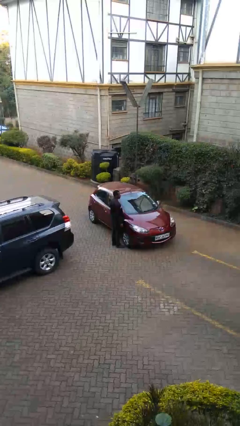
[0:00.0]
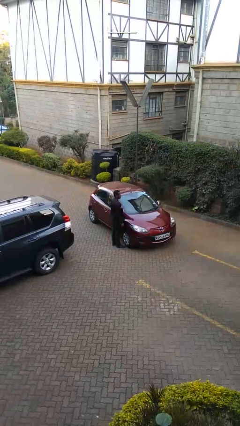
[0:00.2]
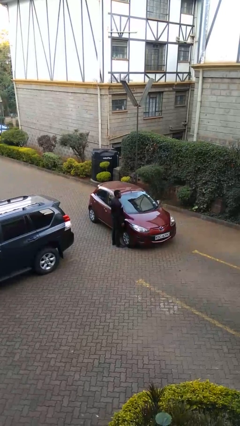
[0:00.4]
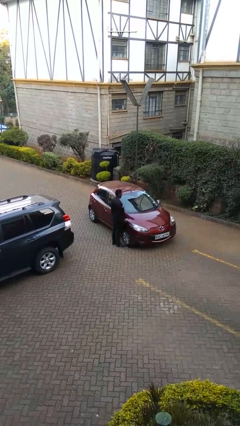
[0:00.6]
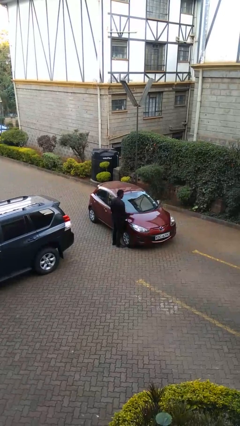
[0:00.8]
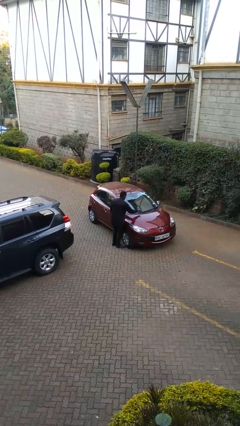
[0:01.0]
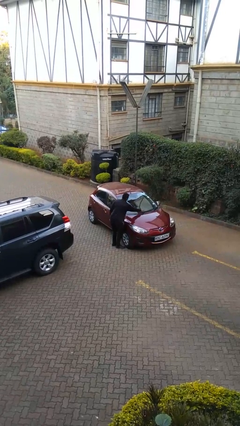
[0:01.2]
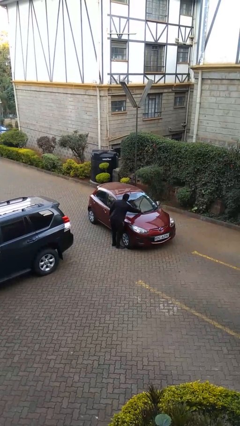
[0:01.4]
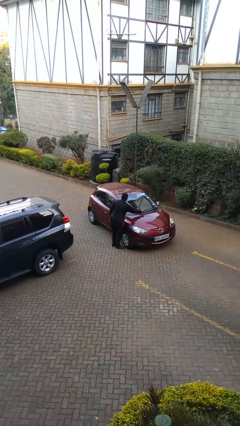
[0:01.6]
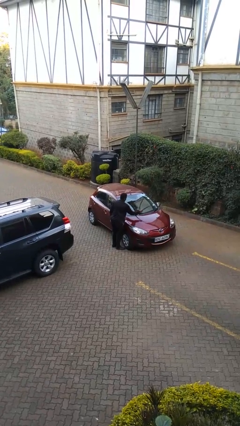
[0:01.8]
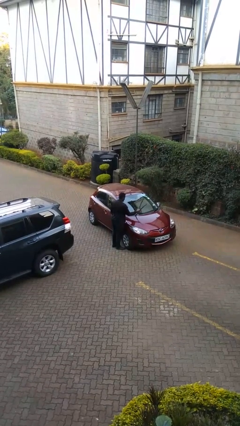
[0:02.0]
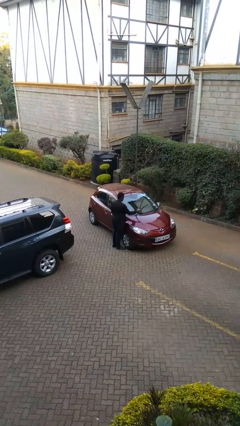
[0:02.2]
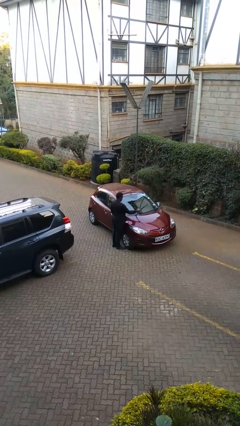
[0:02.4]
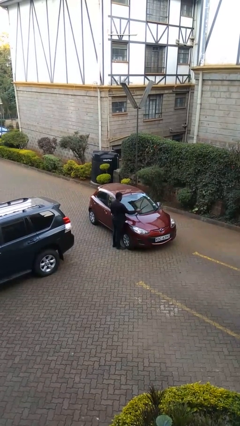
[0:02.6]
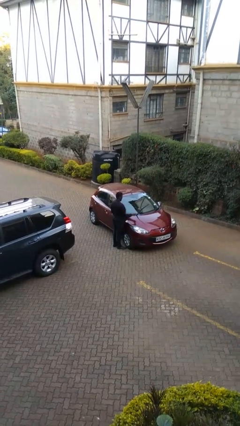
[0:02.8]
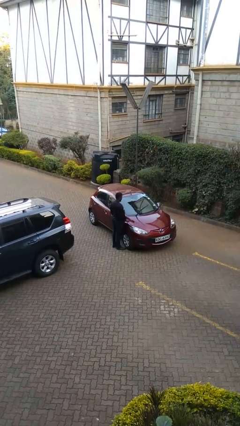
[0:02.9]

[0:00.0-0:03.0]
person flips up car wipers

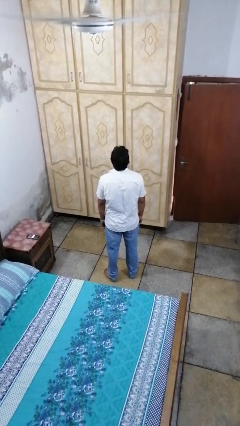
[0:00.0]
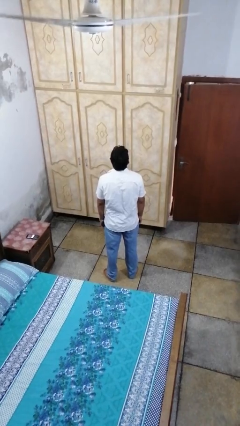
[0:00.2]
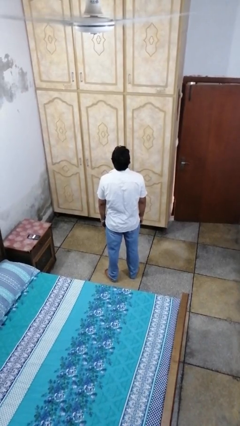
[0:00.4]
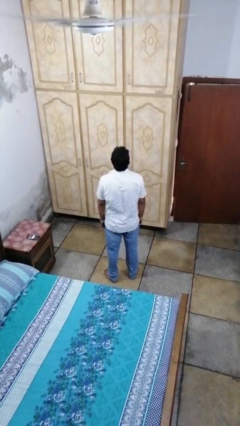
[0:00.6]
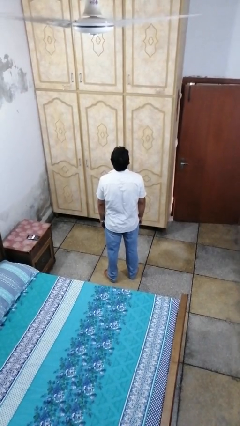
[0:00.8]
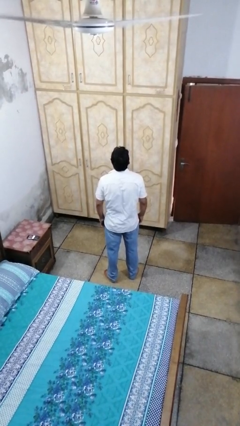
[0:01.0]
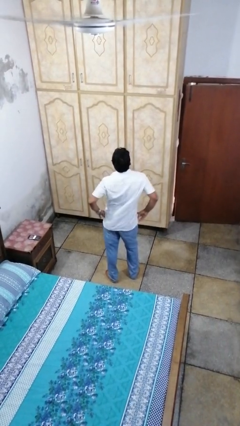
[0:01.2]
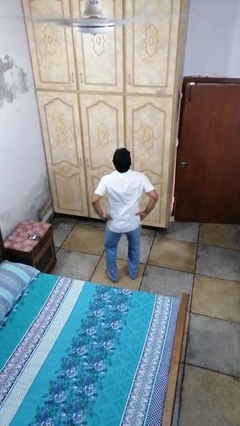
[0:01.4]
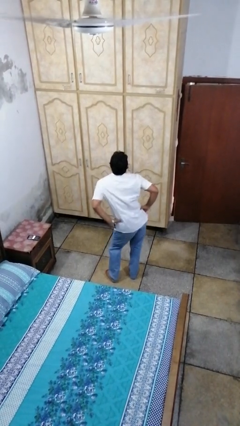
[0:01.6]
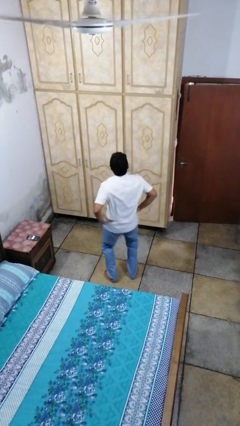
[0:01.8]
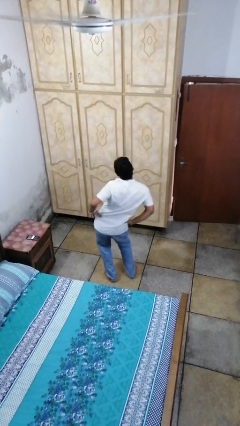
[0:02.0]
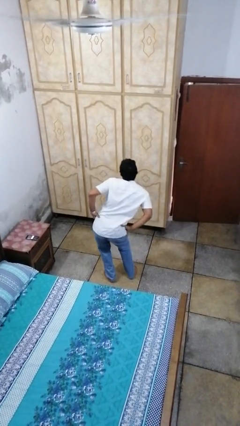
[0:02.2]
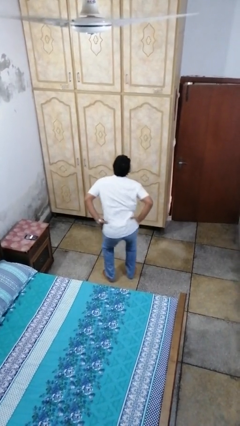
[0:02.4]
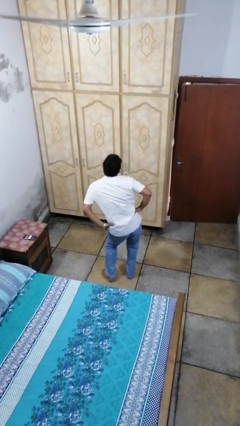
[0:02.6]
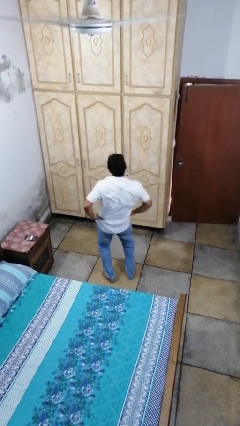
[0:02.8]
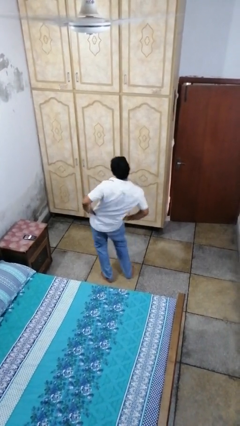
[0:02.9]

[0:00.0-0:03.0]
person wiggles hips

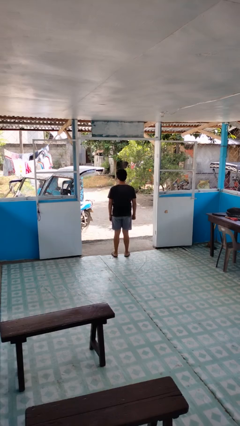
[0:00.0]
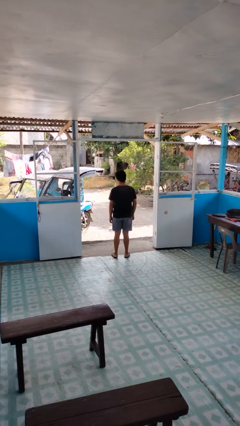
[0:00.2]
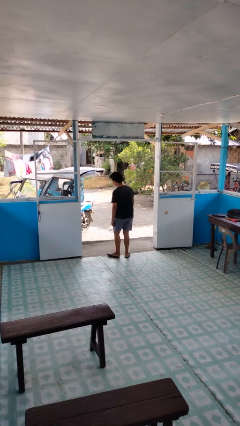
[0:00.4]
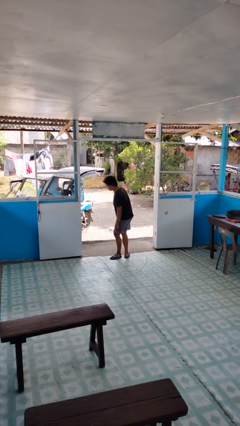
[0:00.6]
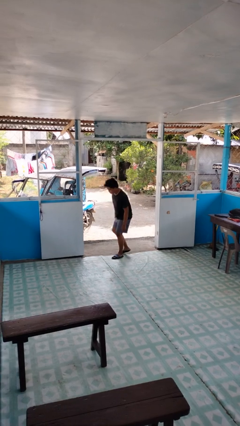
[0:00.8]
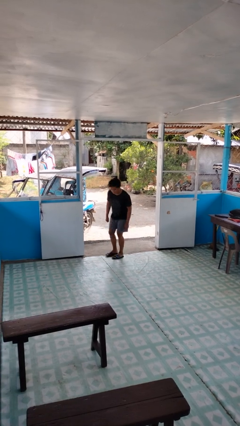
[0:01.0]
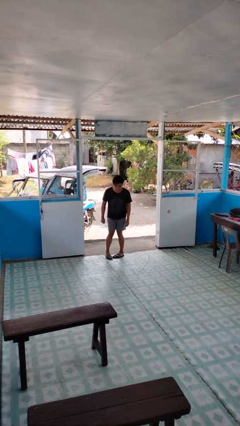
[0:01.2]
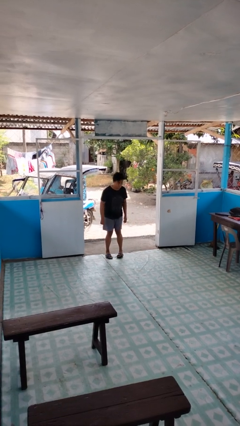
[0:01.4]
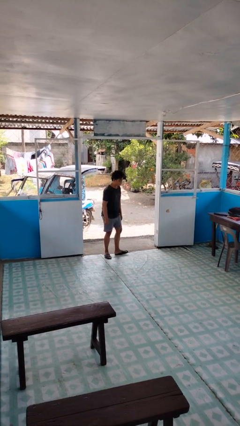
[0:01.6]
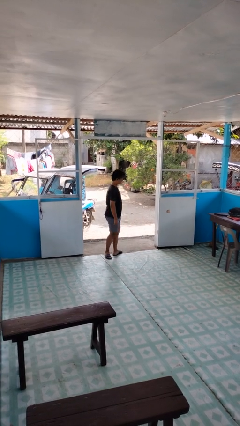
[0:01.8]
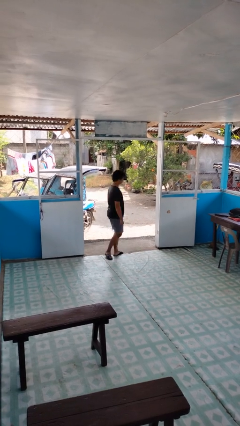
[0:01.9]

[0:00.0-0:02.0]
person twirls

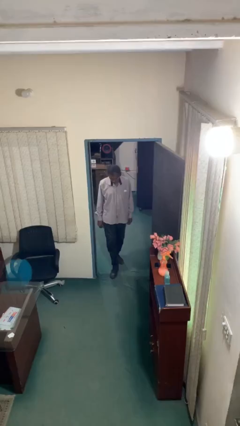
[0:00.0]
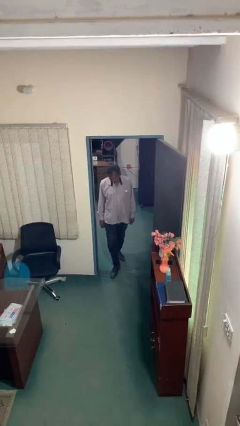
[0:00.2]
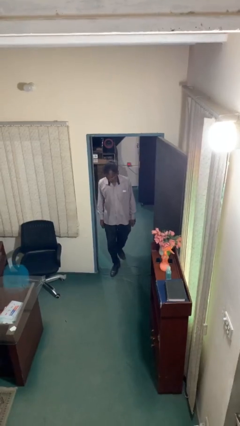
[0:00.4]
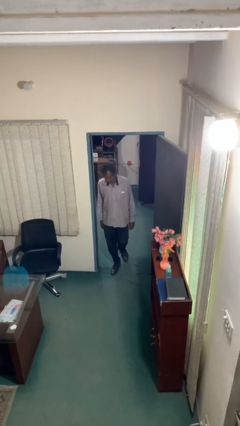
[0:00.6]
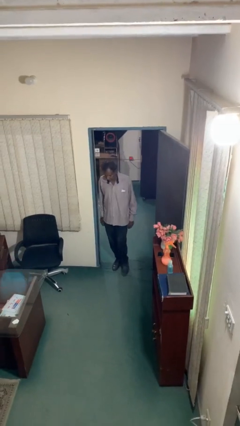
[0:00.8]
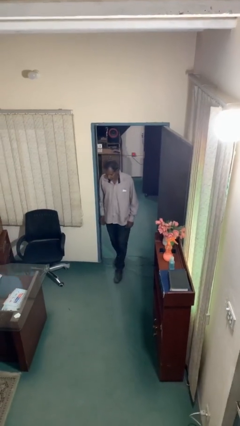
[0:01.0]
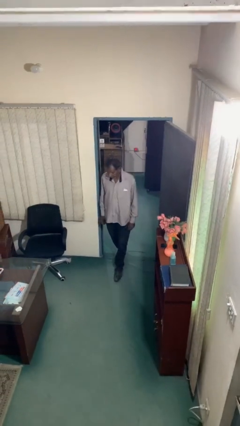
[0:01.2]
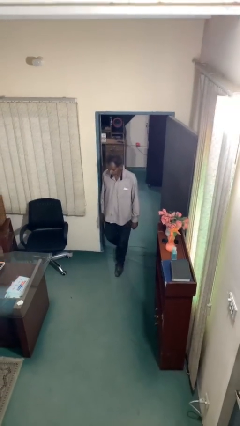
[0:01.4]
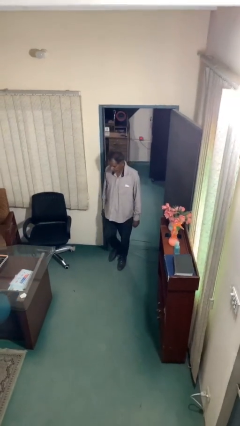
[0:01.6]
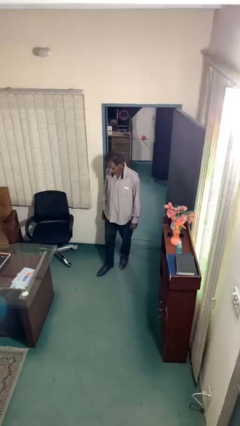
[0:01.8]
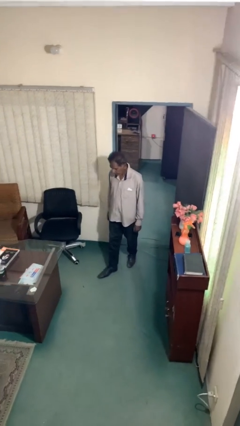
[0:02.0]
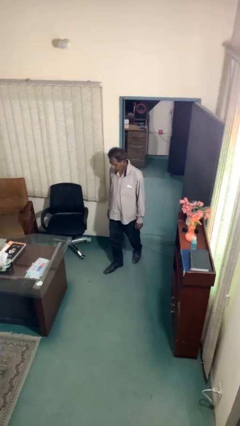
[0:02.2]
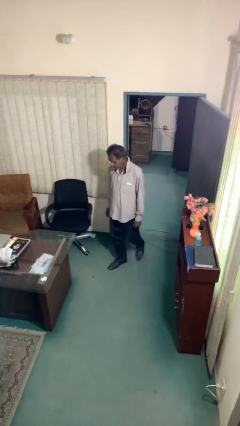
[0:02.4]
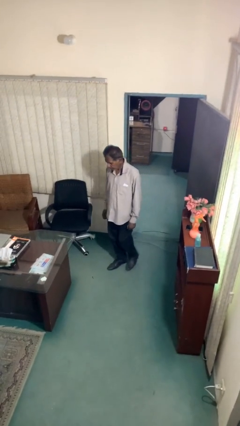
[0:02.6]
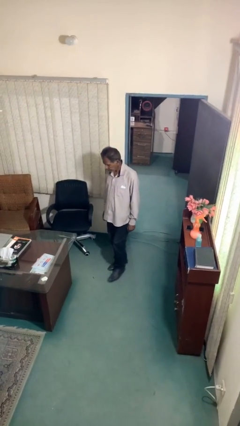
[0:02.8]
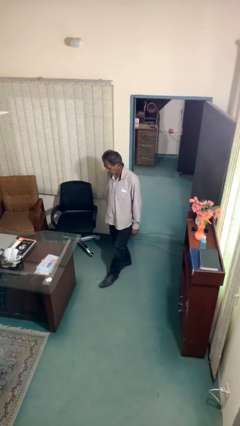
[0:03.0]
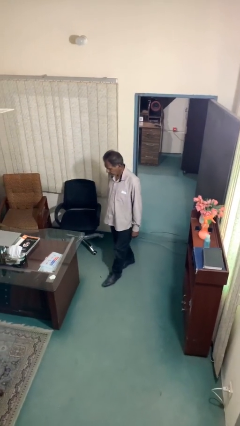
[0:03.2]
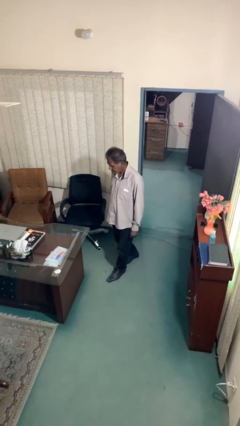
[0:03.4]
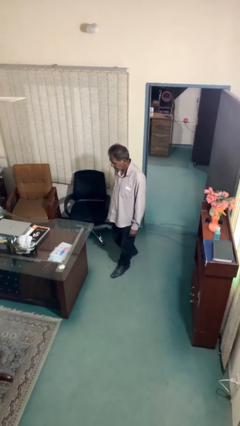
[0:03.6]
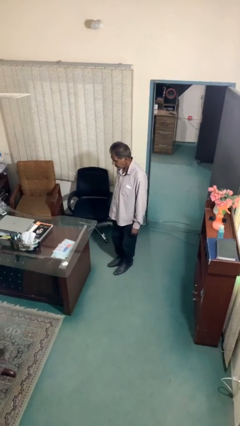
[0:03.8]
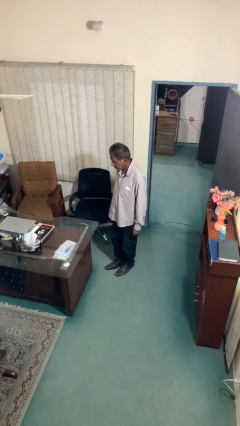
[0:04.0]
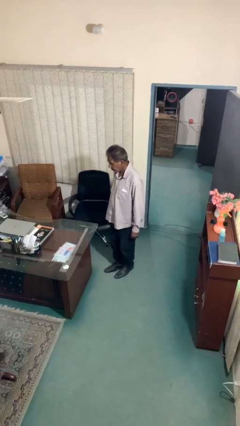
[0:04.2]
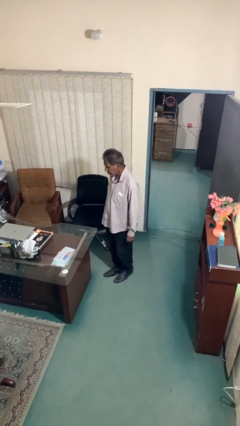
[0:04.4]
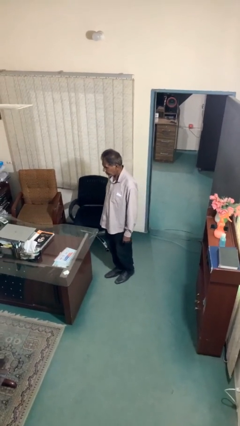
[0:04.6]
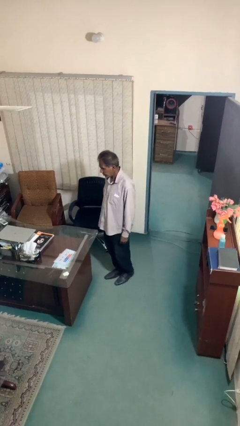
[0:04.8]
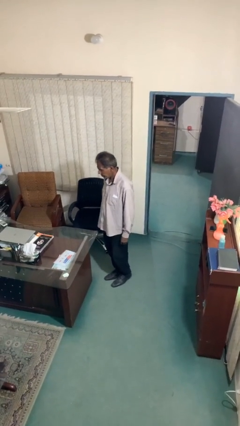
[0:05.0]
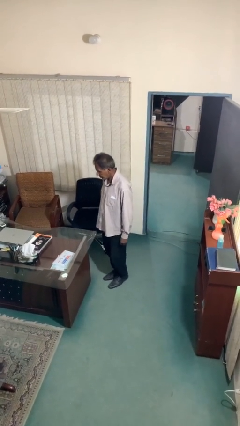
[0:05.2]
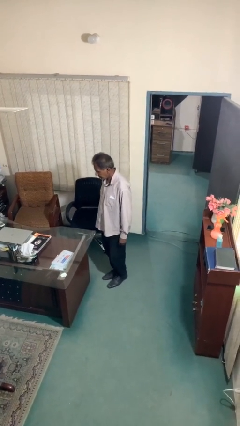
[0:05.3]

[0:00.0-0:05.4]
person enters scene through structure

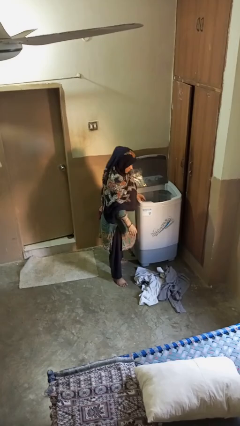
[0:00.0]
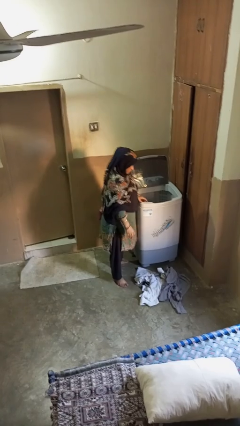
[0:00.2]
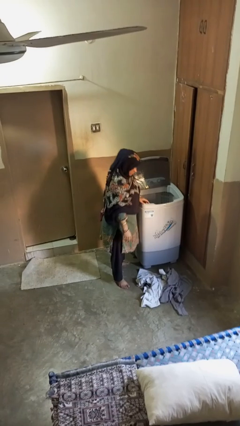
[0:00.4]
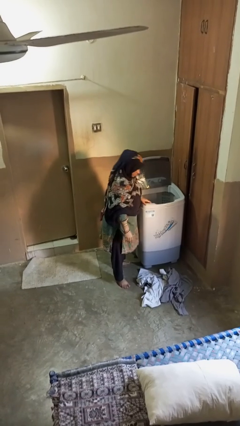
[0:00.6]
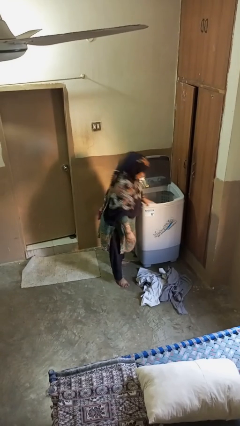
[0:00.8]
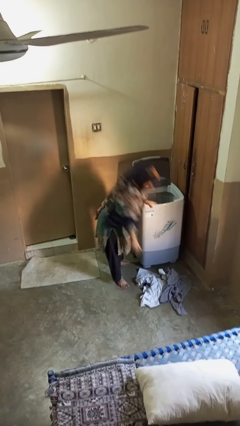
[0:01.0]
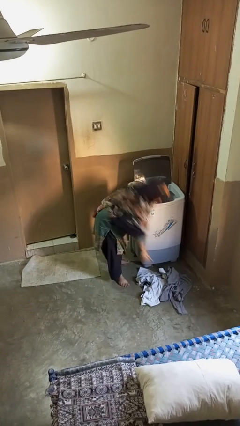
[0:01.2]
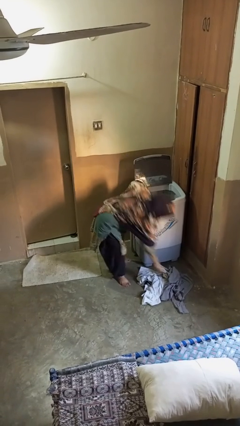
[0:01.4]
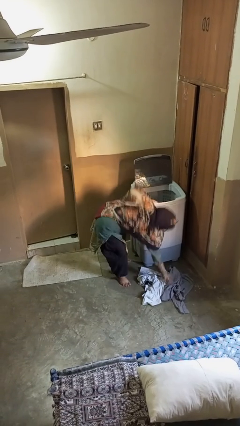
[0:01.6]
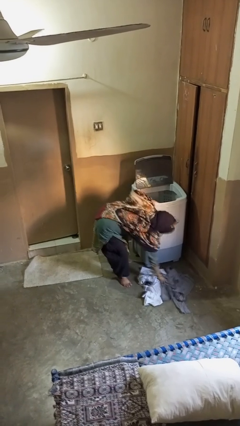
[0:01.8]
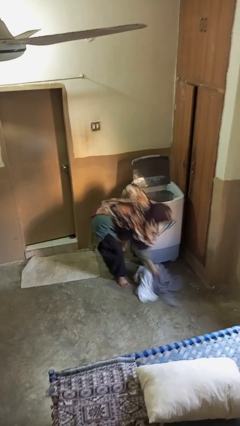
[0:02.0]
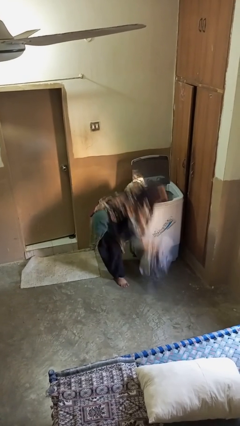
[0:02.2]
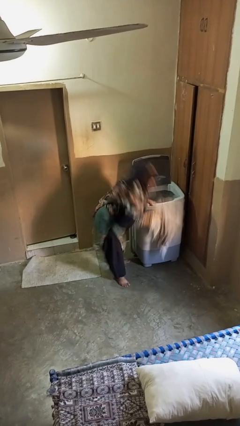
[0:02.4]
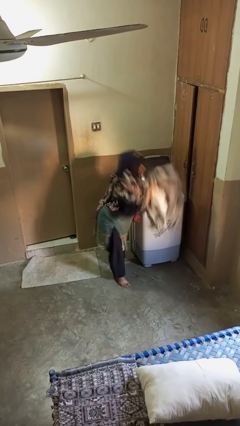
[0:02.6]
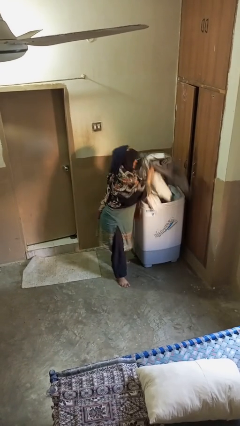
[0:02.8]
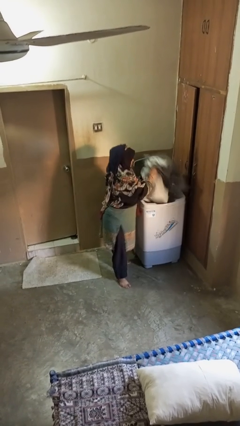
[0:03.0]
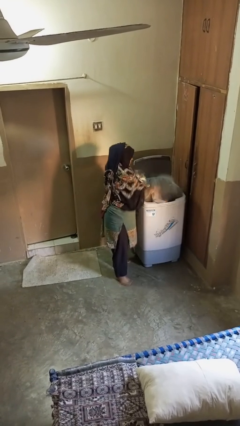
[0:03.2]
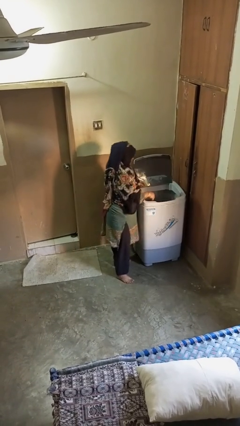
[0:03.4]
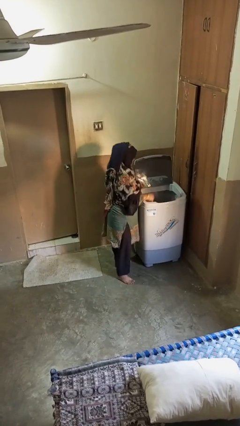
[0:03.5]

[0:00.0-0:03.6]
person loads clotheswasher

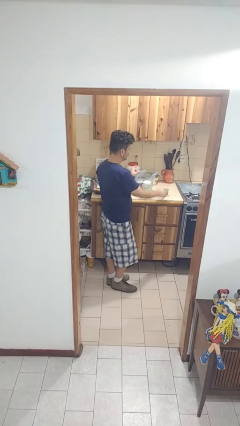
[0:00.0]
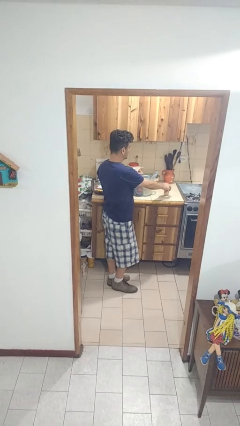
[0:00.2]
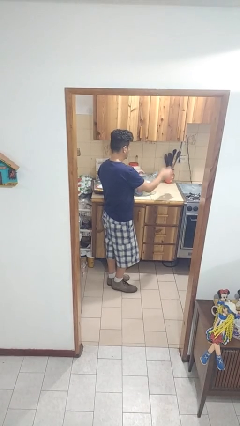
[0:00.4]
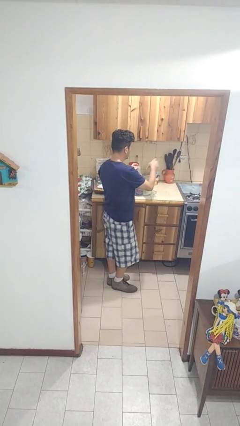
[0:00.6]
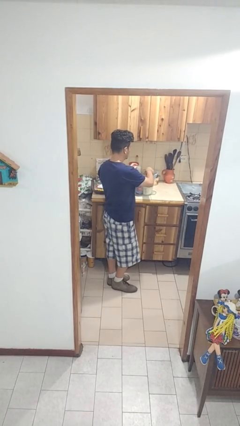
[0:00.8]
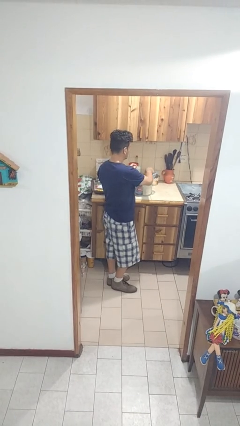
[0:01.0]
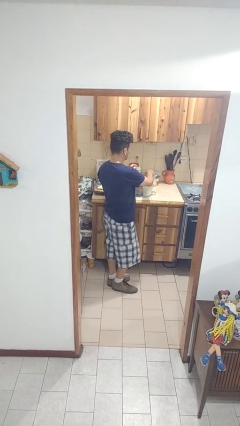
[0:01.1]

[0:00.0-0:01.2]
person puts object into bag
